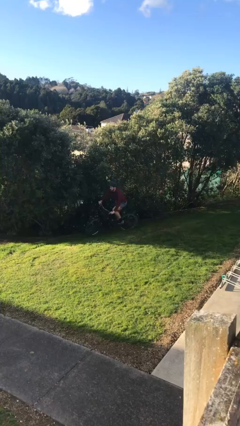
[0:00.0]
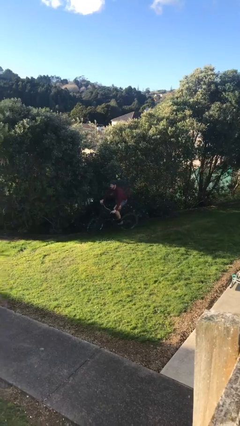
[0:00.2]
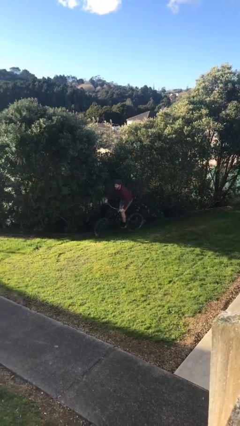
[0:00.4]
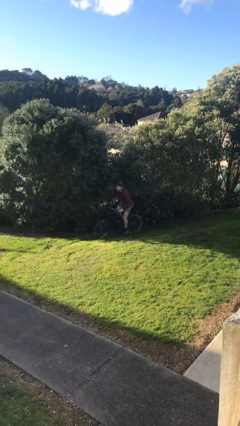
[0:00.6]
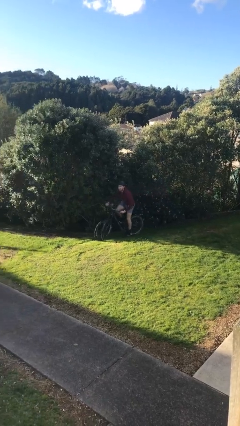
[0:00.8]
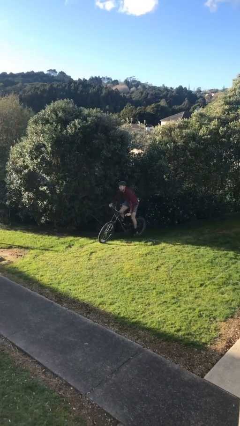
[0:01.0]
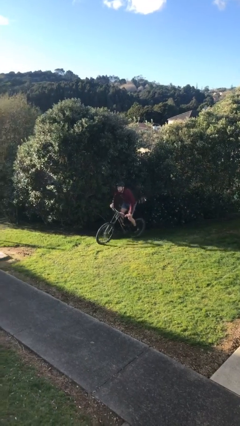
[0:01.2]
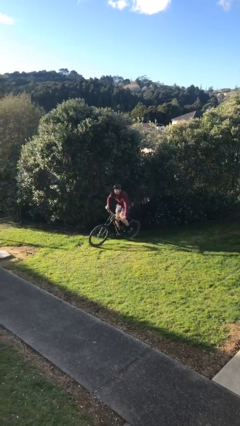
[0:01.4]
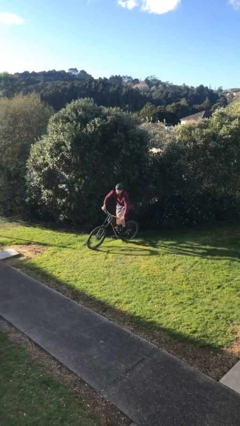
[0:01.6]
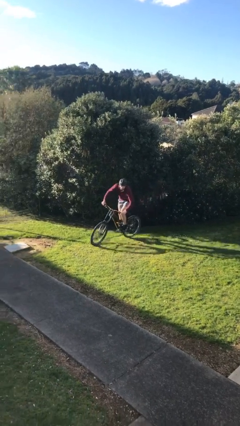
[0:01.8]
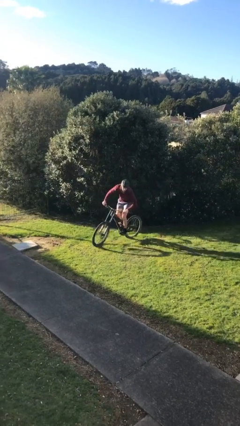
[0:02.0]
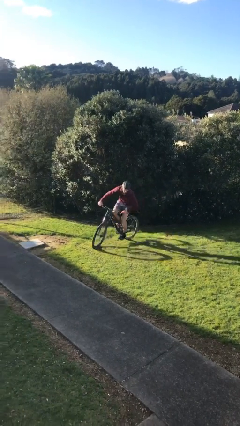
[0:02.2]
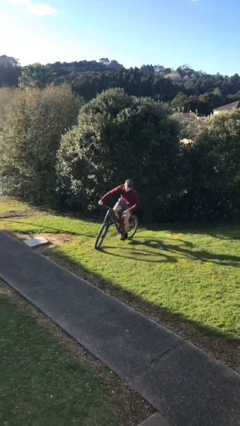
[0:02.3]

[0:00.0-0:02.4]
person rides bicycle

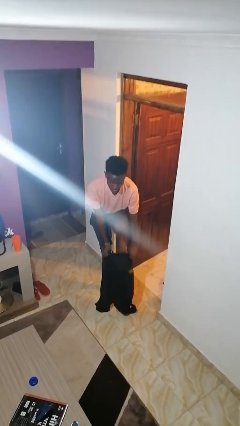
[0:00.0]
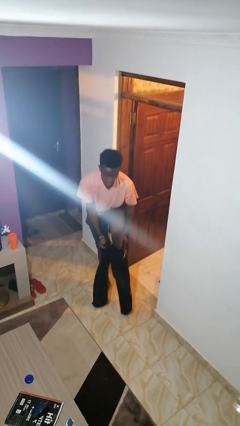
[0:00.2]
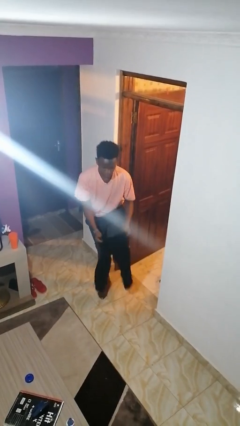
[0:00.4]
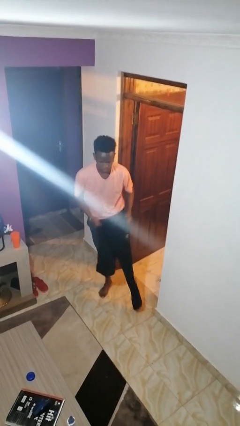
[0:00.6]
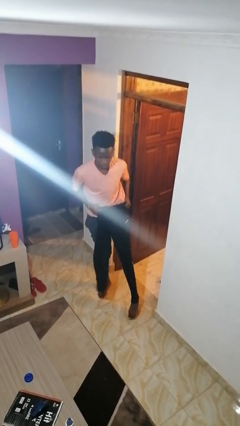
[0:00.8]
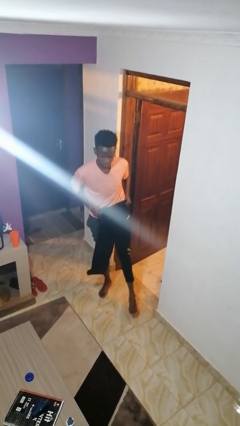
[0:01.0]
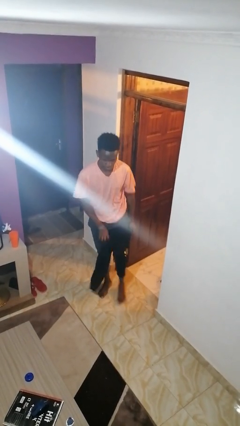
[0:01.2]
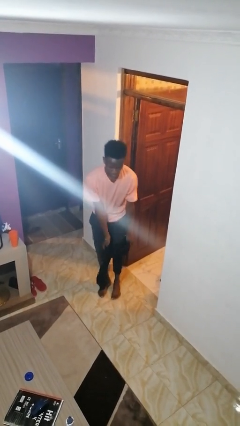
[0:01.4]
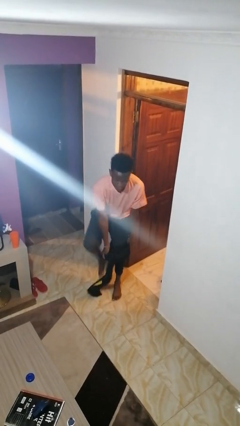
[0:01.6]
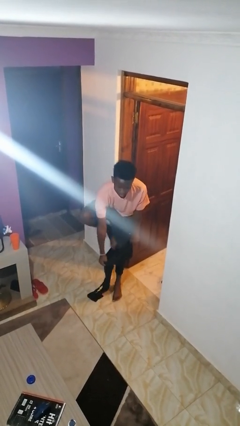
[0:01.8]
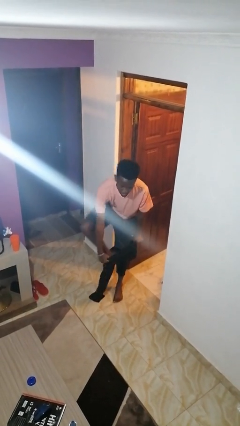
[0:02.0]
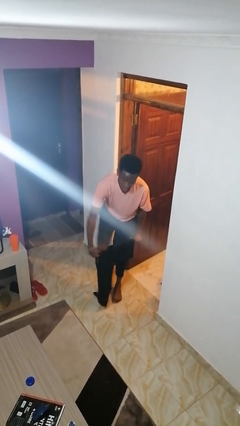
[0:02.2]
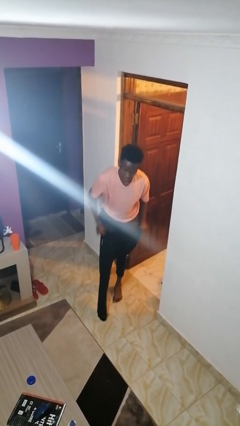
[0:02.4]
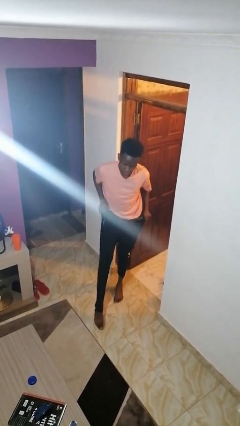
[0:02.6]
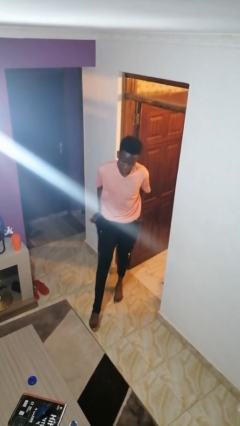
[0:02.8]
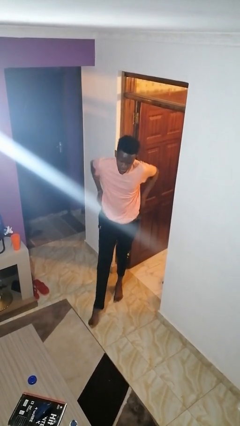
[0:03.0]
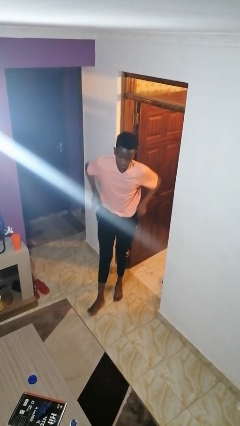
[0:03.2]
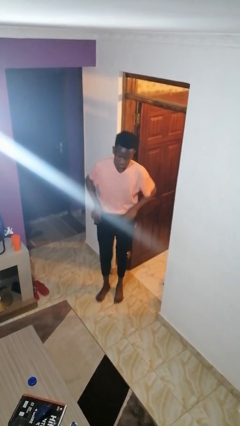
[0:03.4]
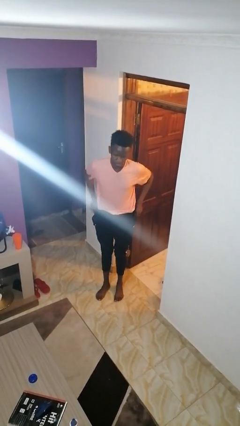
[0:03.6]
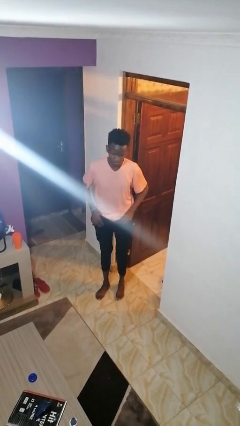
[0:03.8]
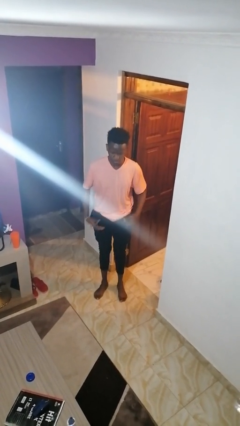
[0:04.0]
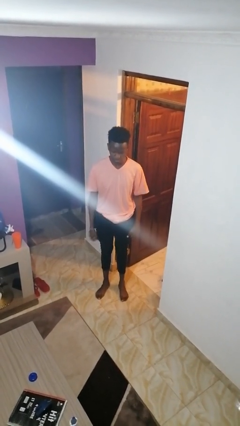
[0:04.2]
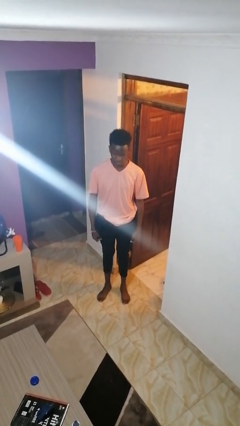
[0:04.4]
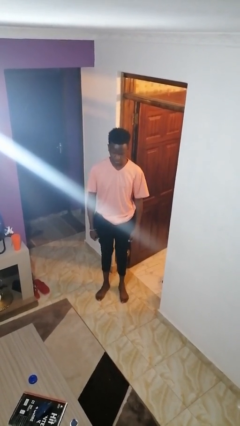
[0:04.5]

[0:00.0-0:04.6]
person puts on pants

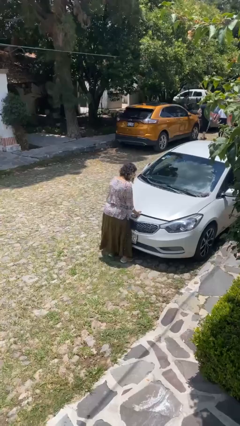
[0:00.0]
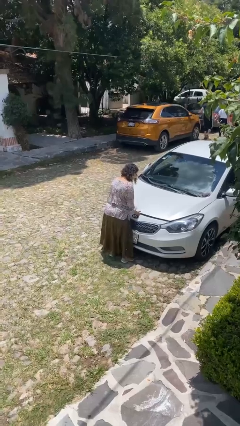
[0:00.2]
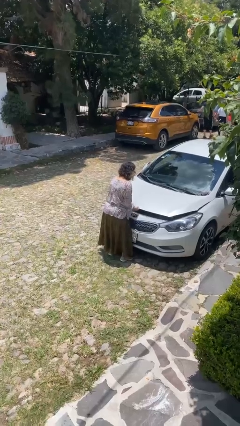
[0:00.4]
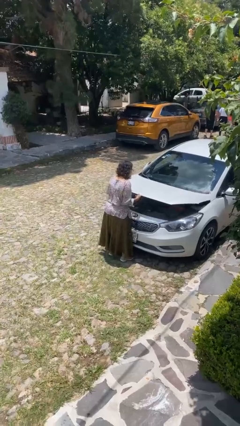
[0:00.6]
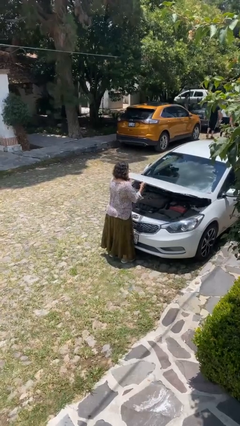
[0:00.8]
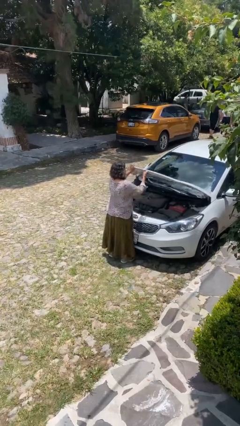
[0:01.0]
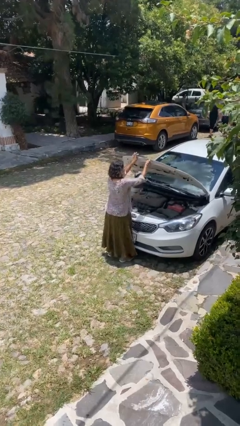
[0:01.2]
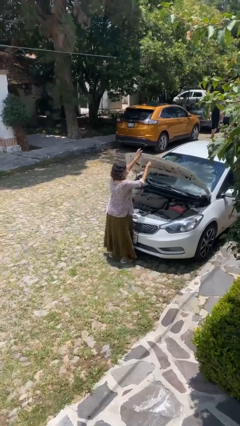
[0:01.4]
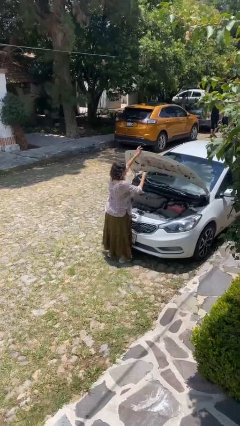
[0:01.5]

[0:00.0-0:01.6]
person opens car hood

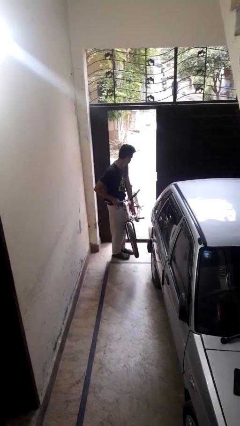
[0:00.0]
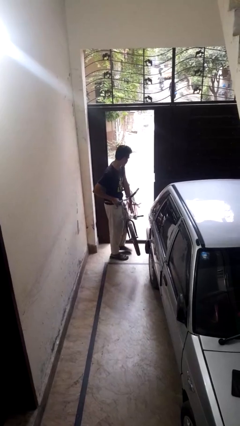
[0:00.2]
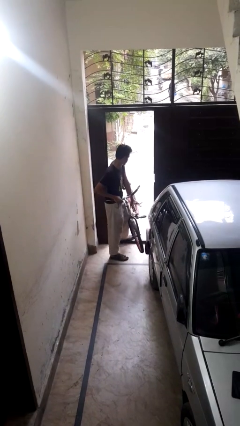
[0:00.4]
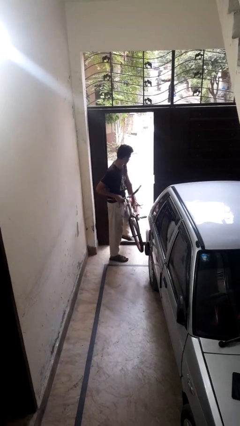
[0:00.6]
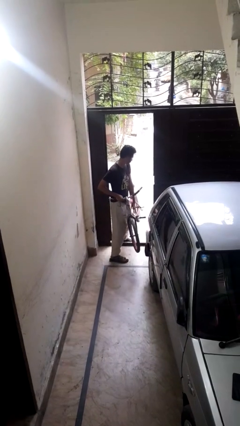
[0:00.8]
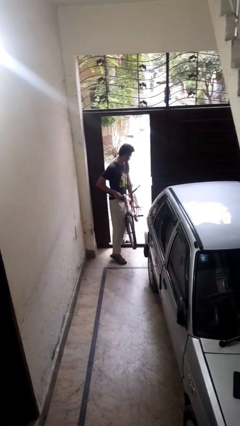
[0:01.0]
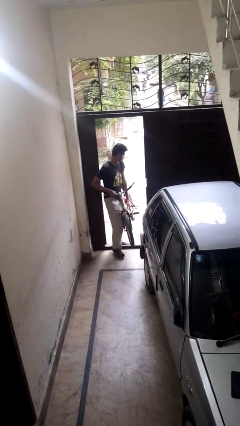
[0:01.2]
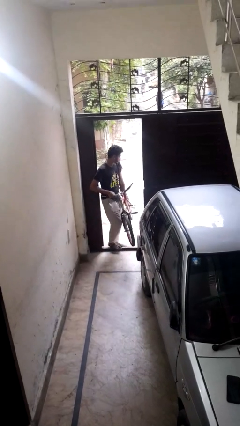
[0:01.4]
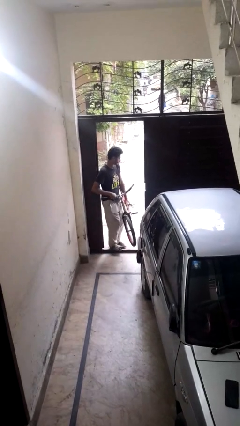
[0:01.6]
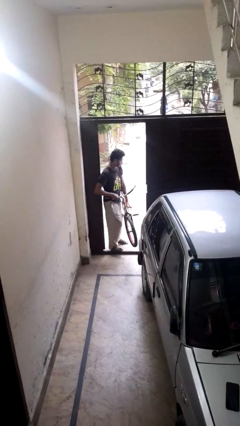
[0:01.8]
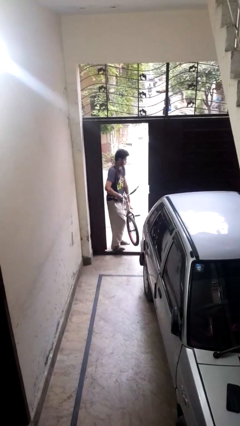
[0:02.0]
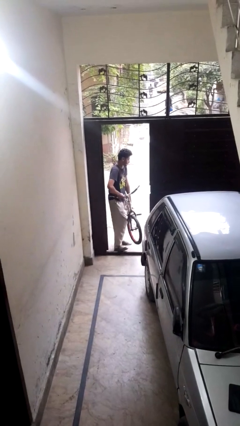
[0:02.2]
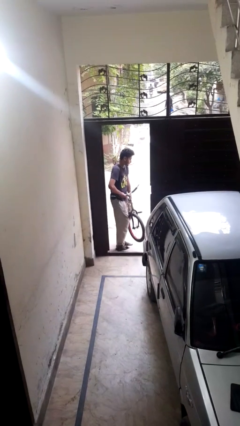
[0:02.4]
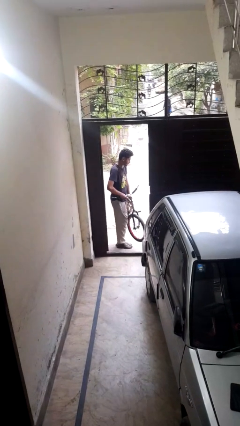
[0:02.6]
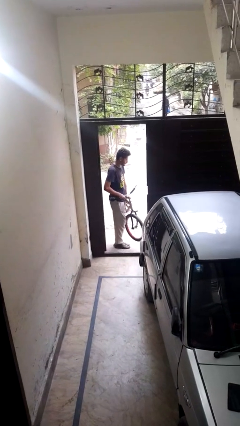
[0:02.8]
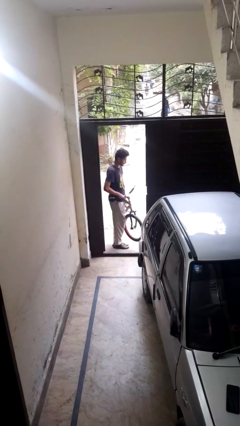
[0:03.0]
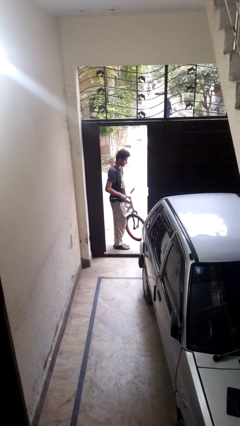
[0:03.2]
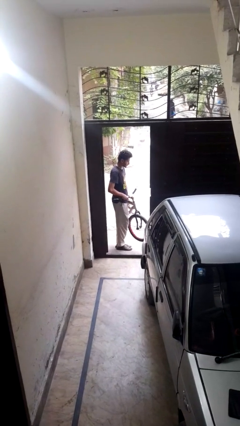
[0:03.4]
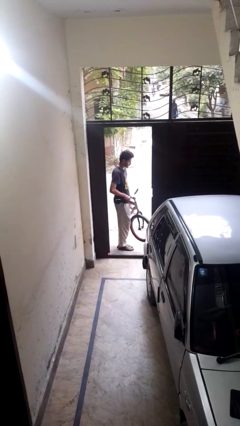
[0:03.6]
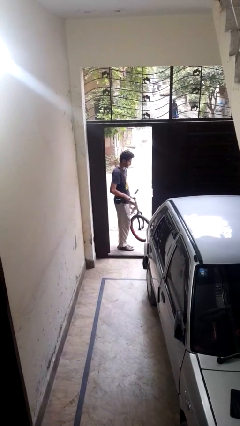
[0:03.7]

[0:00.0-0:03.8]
person carries bicycle

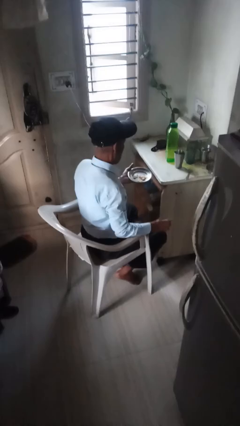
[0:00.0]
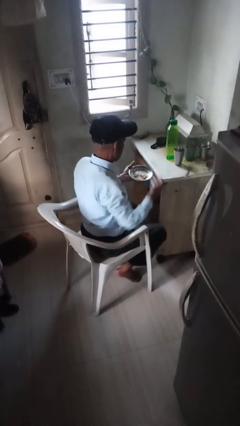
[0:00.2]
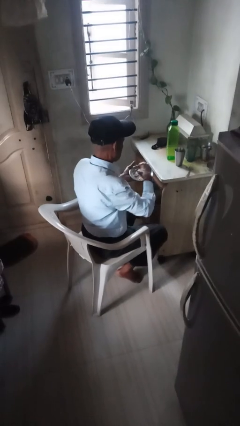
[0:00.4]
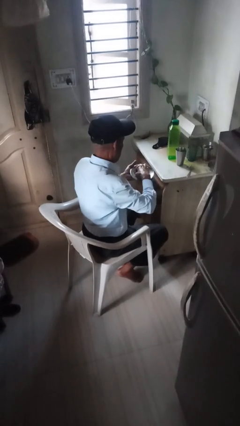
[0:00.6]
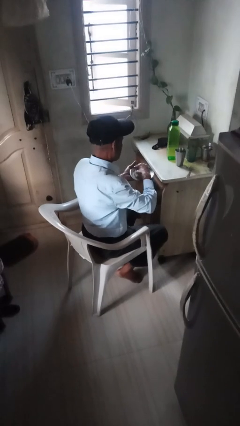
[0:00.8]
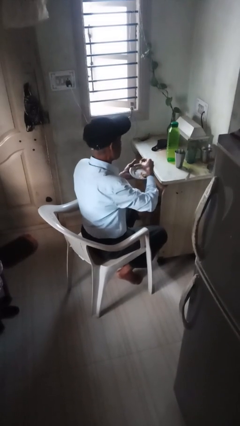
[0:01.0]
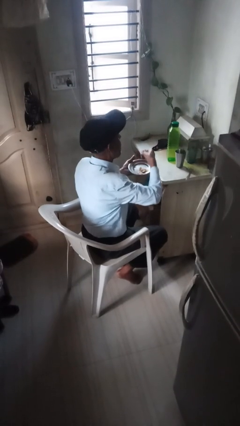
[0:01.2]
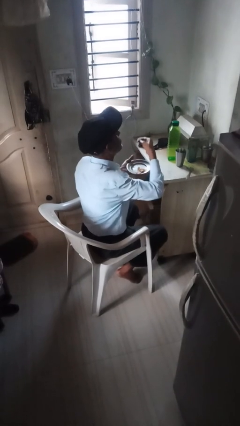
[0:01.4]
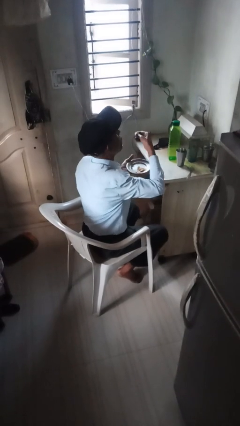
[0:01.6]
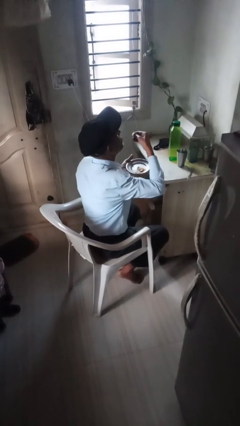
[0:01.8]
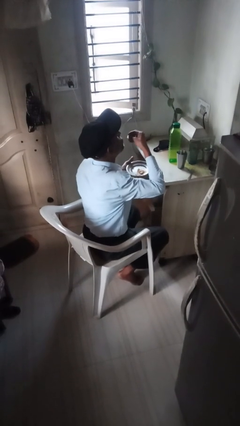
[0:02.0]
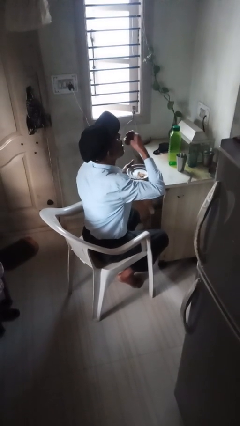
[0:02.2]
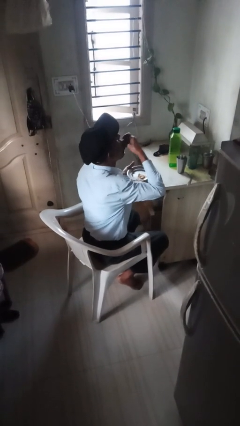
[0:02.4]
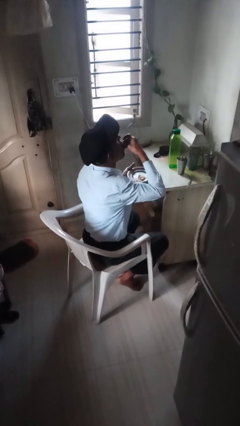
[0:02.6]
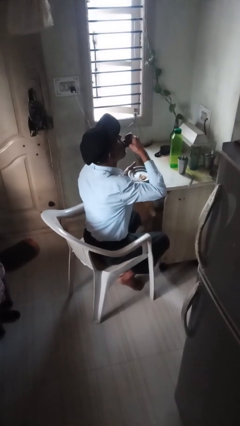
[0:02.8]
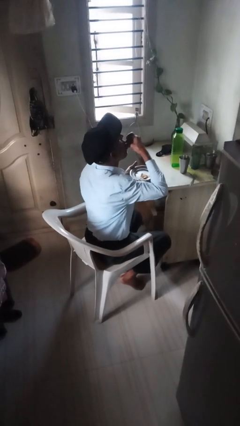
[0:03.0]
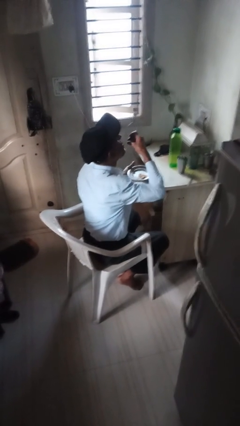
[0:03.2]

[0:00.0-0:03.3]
person eats with hands

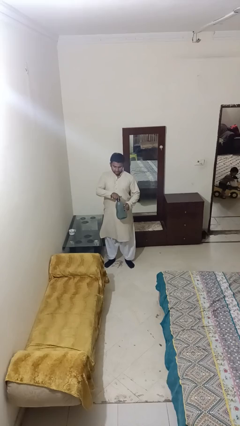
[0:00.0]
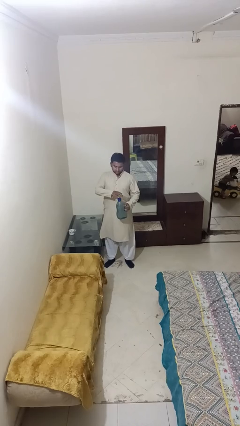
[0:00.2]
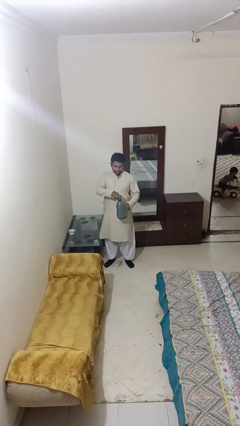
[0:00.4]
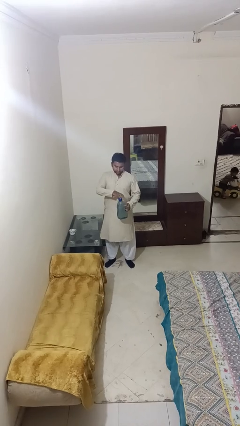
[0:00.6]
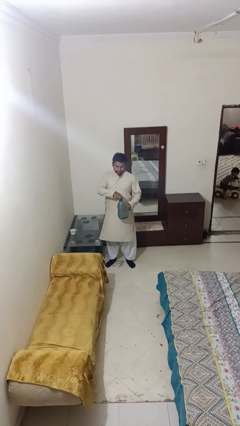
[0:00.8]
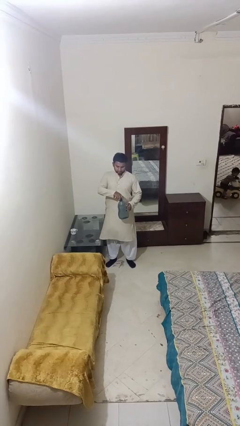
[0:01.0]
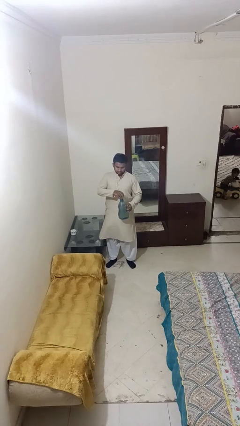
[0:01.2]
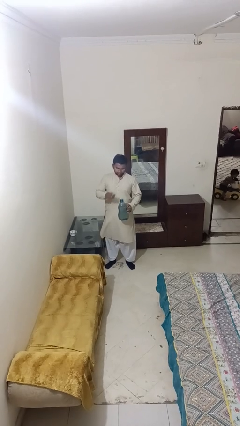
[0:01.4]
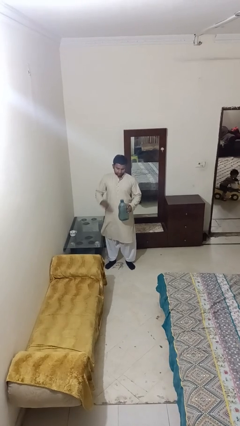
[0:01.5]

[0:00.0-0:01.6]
person unscrews lid from bottle

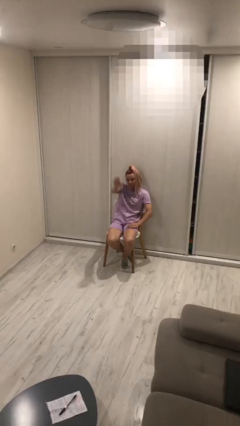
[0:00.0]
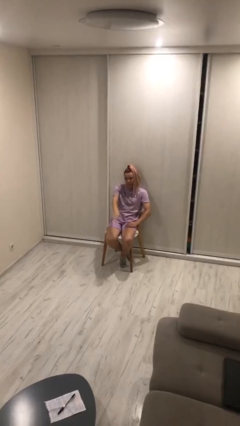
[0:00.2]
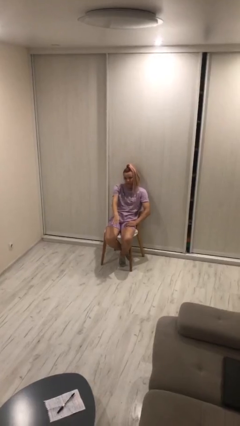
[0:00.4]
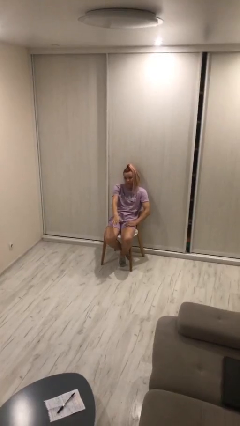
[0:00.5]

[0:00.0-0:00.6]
person gestures swipe down
